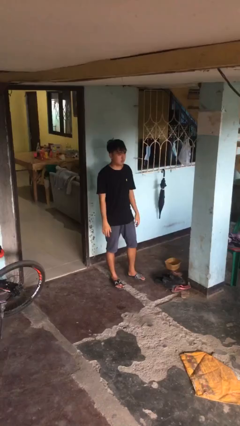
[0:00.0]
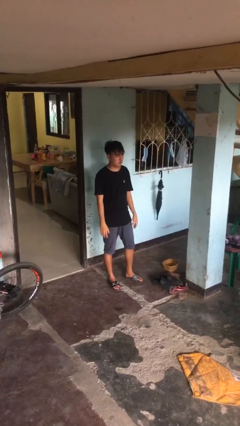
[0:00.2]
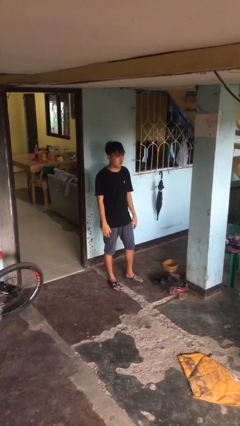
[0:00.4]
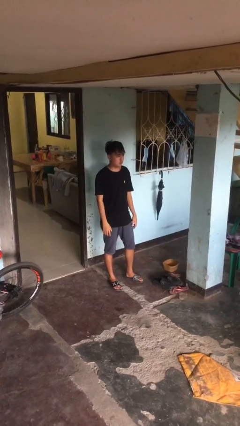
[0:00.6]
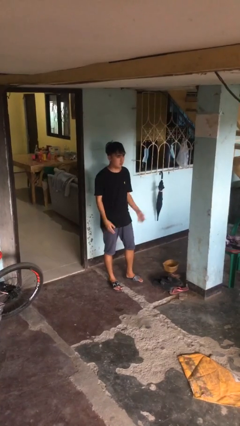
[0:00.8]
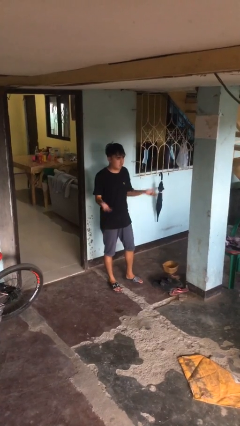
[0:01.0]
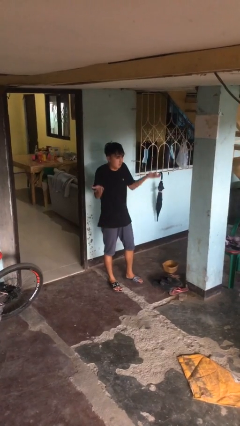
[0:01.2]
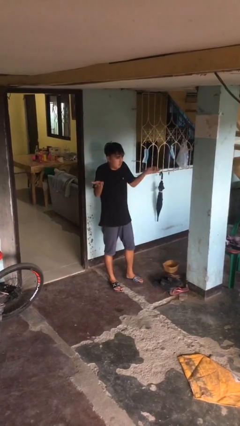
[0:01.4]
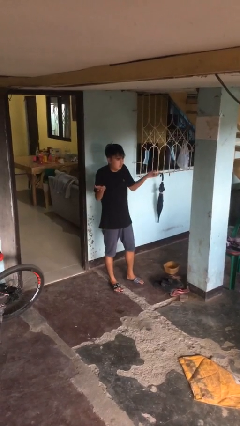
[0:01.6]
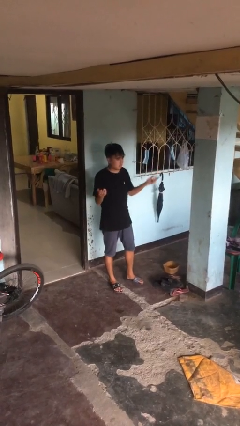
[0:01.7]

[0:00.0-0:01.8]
person shrugs

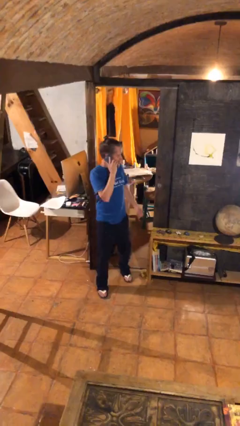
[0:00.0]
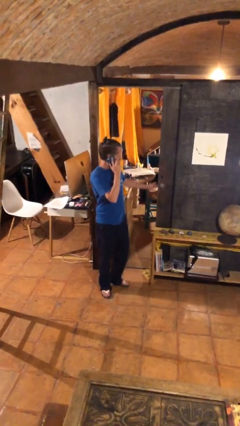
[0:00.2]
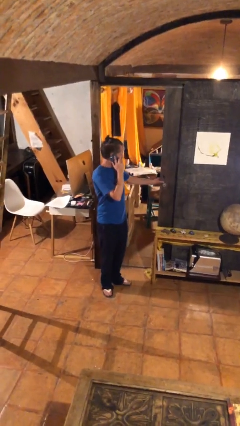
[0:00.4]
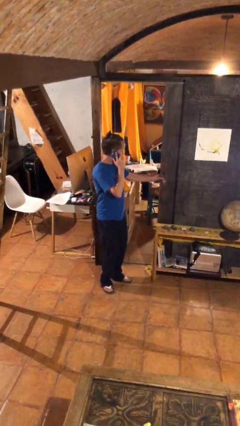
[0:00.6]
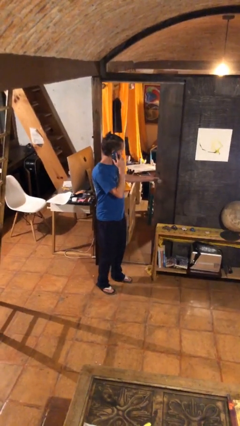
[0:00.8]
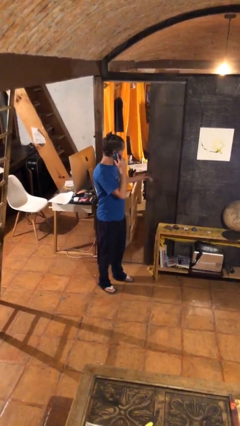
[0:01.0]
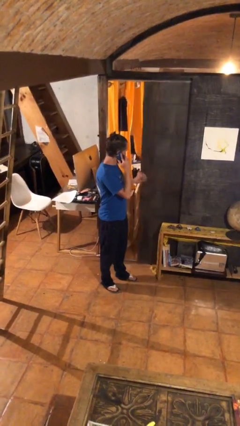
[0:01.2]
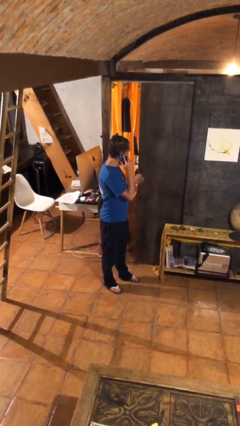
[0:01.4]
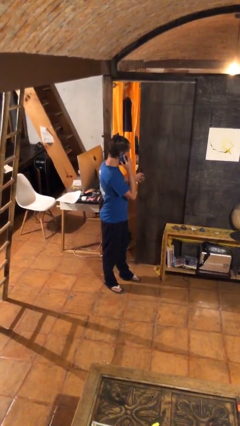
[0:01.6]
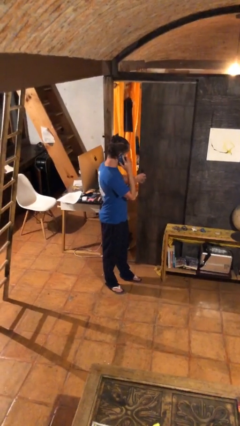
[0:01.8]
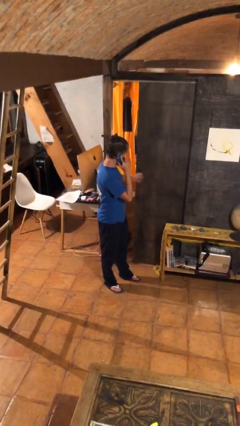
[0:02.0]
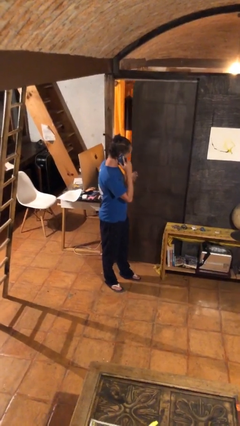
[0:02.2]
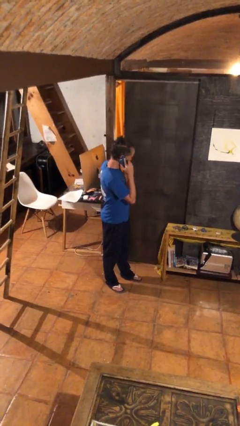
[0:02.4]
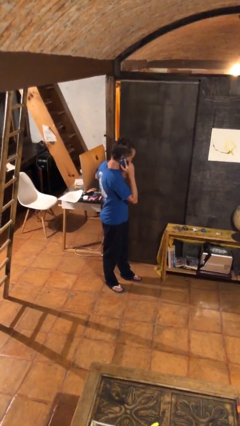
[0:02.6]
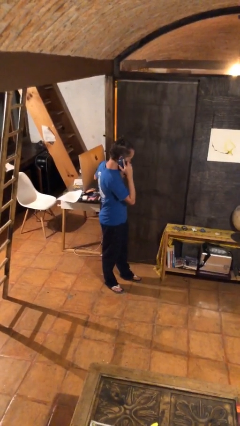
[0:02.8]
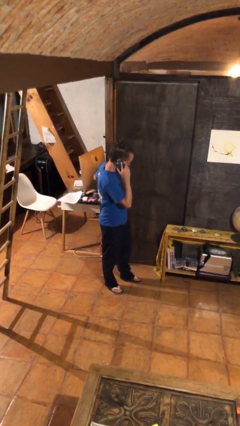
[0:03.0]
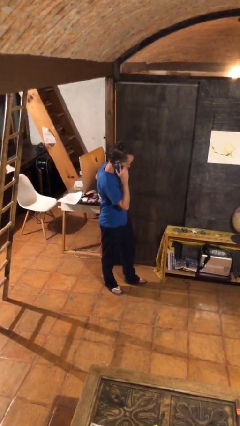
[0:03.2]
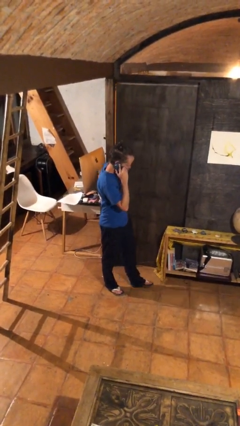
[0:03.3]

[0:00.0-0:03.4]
person closes facility door

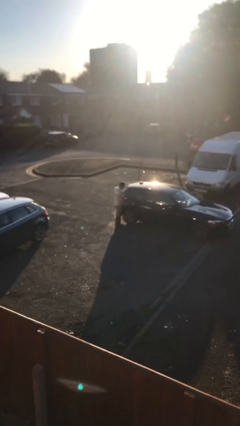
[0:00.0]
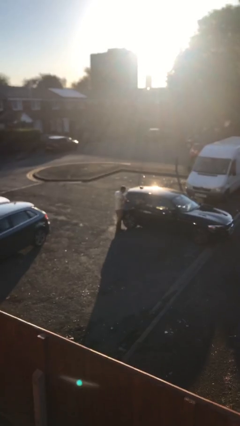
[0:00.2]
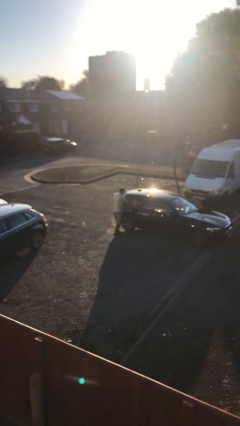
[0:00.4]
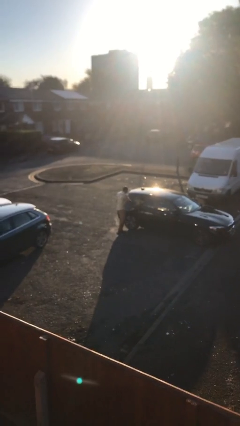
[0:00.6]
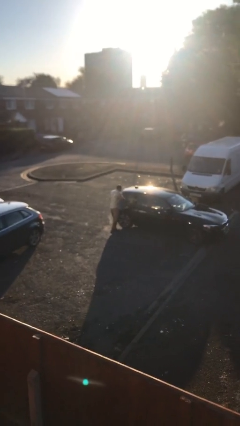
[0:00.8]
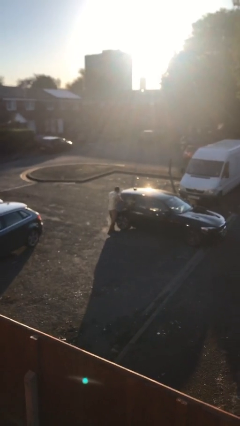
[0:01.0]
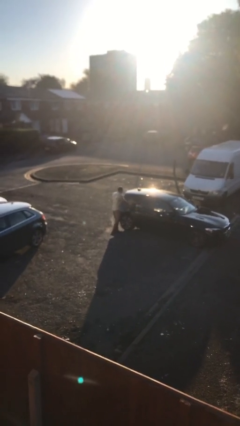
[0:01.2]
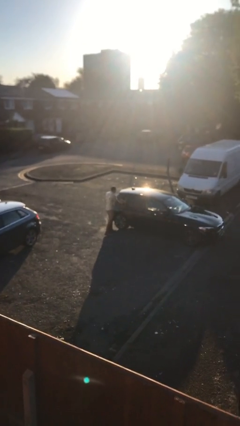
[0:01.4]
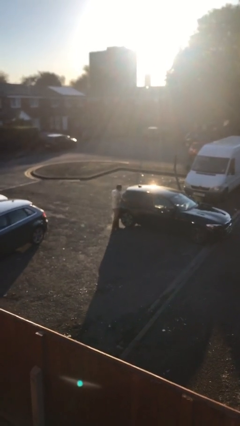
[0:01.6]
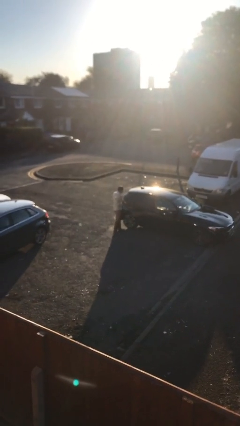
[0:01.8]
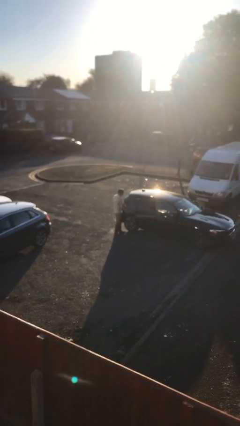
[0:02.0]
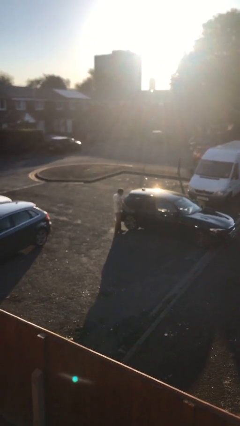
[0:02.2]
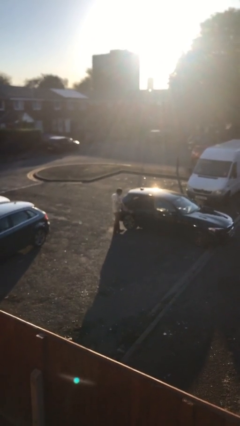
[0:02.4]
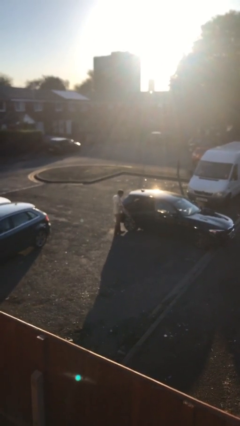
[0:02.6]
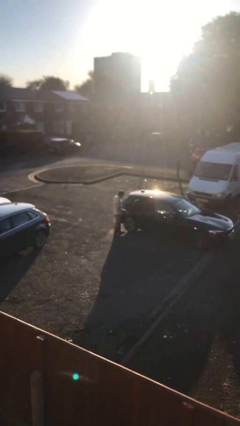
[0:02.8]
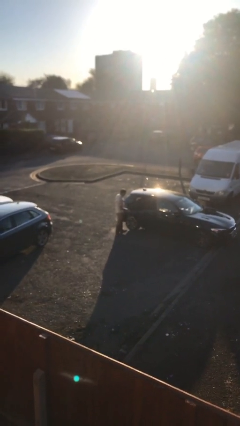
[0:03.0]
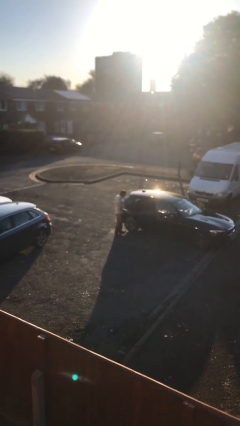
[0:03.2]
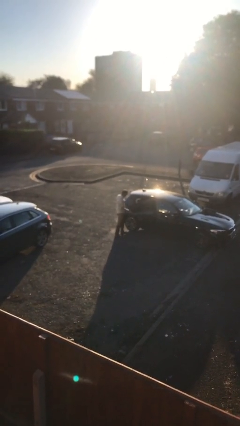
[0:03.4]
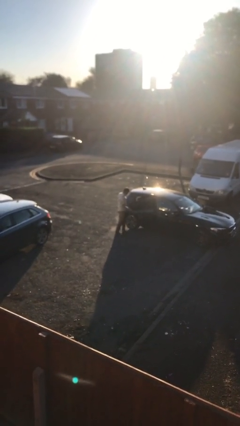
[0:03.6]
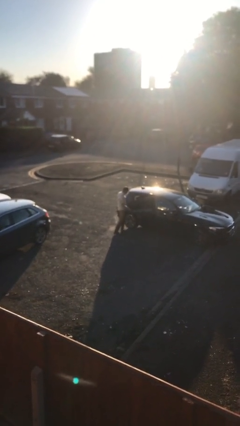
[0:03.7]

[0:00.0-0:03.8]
person opens car door

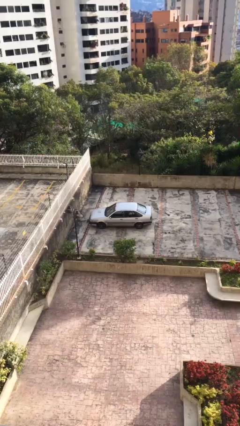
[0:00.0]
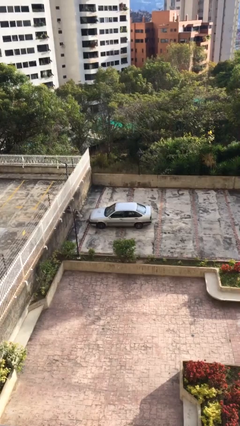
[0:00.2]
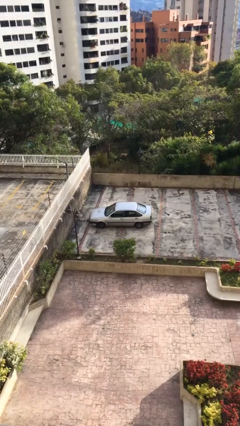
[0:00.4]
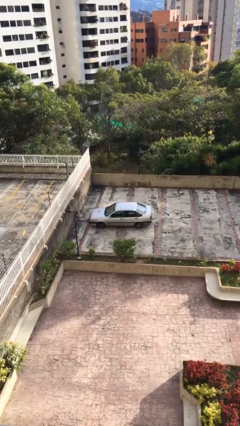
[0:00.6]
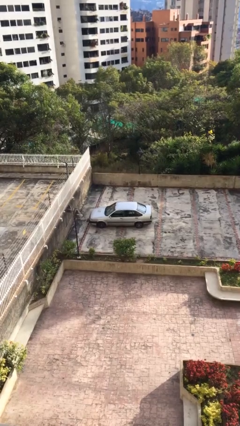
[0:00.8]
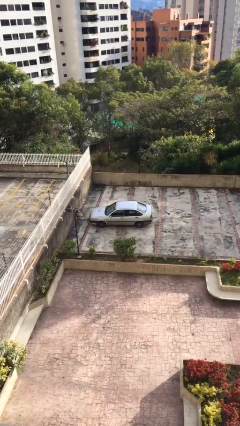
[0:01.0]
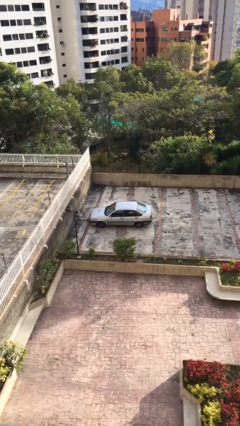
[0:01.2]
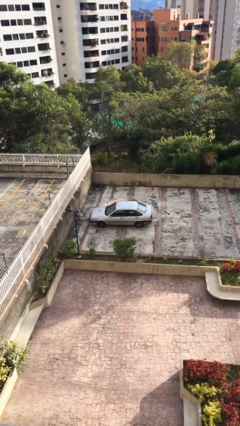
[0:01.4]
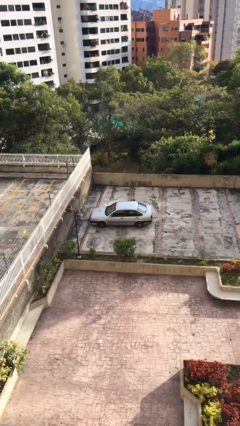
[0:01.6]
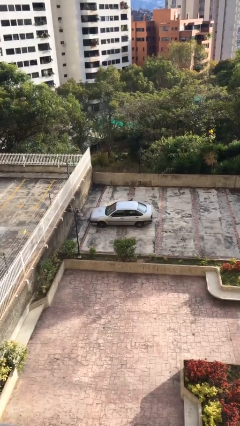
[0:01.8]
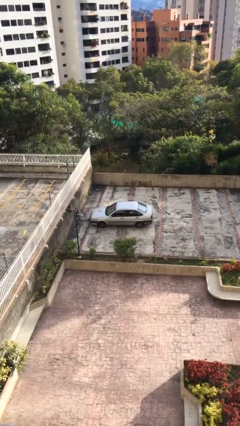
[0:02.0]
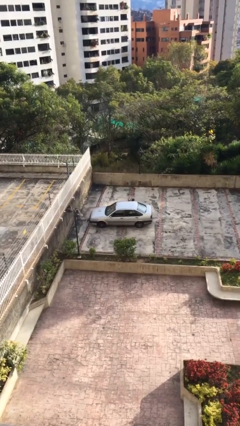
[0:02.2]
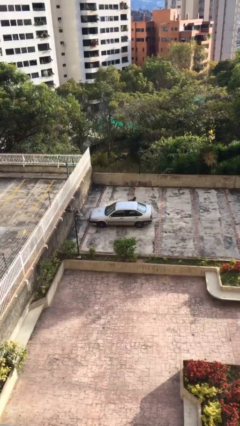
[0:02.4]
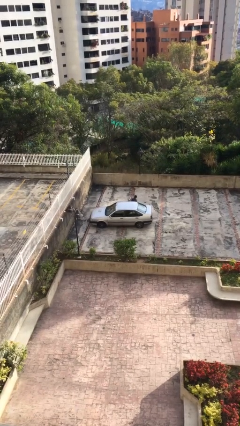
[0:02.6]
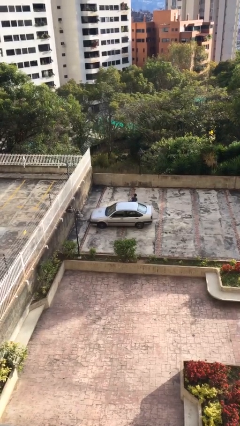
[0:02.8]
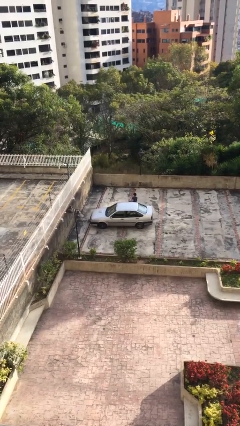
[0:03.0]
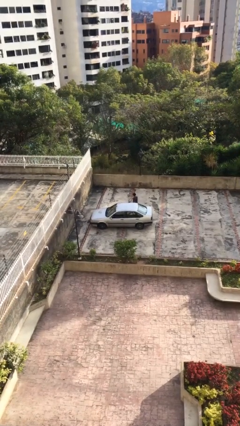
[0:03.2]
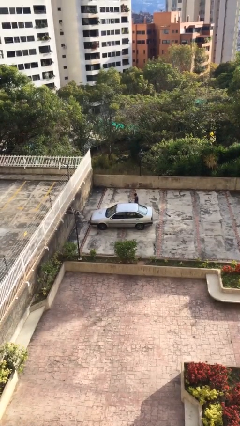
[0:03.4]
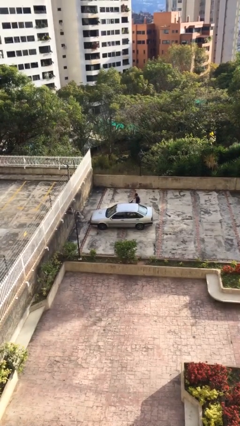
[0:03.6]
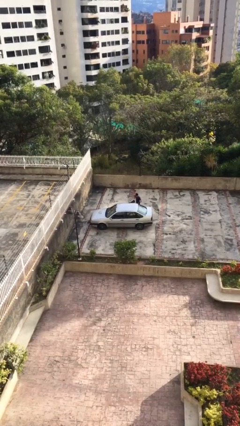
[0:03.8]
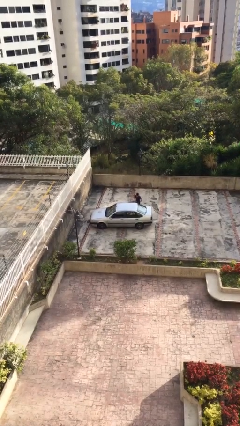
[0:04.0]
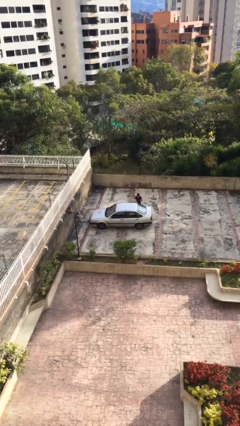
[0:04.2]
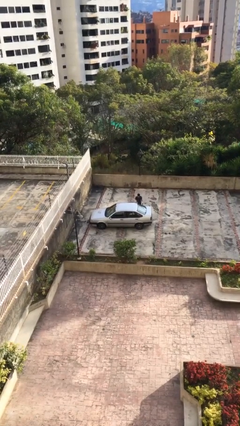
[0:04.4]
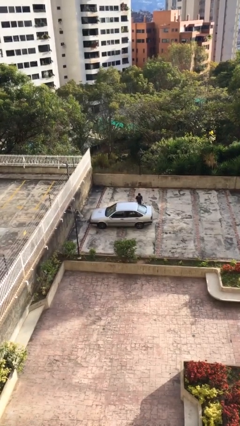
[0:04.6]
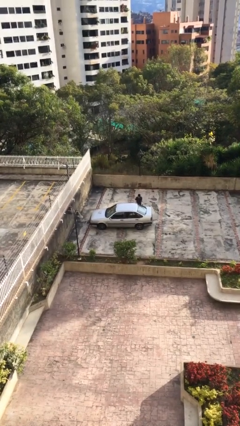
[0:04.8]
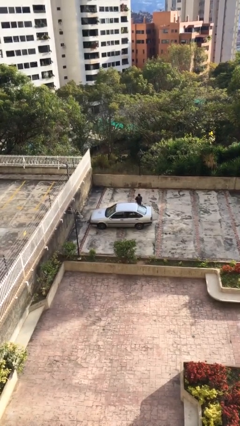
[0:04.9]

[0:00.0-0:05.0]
car drops off person

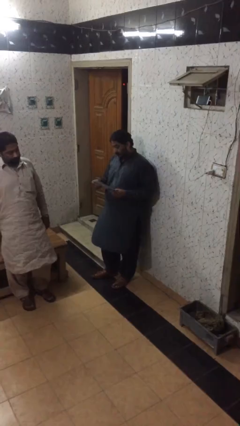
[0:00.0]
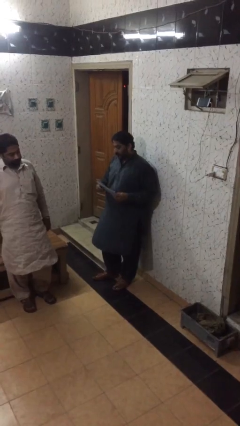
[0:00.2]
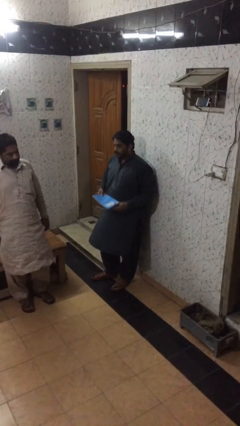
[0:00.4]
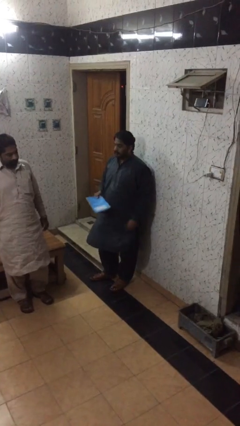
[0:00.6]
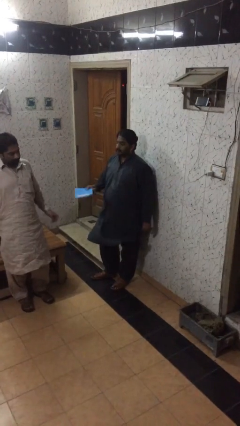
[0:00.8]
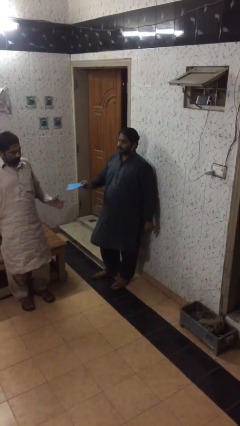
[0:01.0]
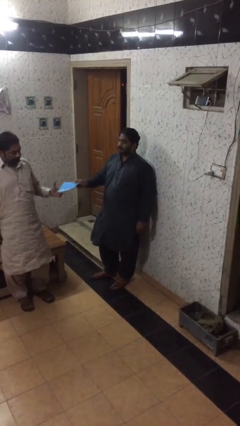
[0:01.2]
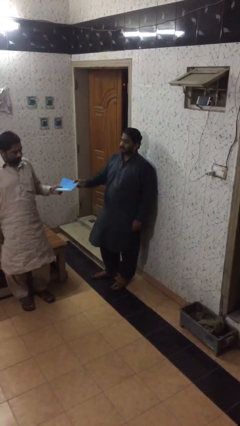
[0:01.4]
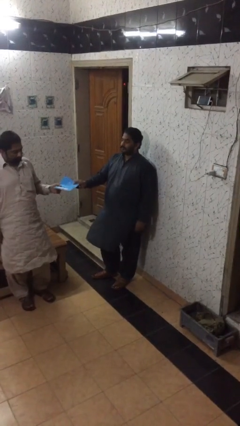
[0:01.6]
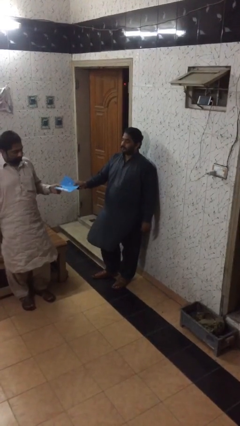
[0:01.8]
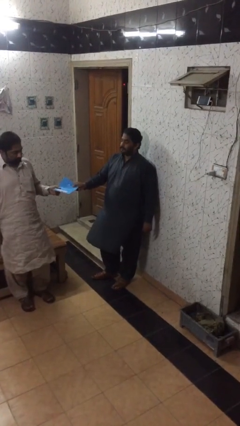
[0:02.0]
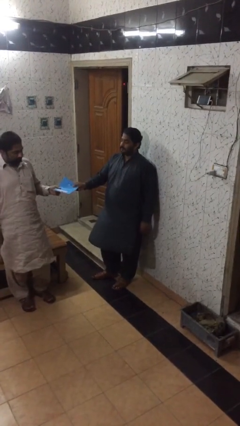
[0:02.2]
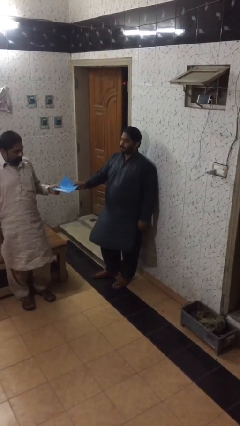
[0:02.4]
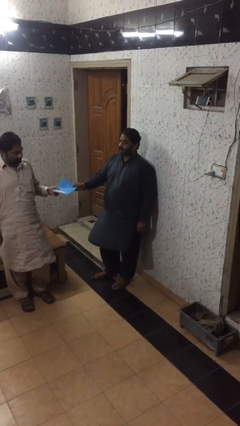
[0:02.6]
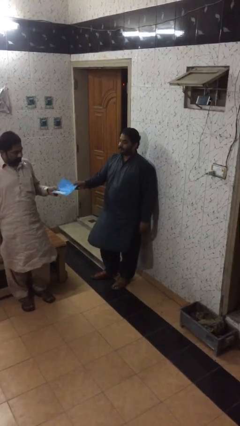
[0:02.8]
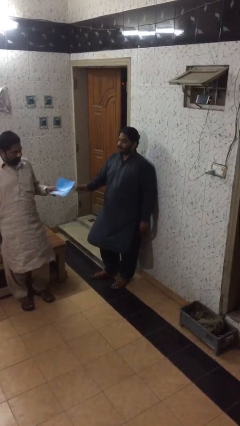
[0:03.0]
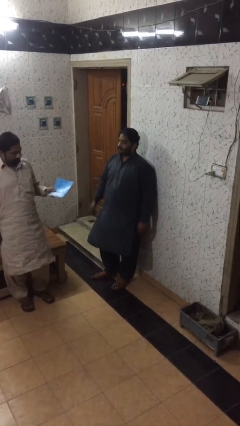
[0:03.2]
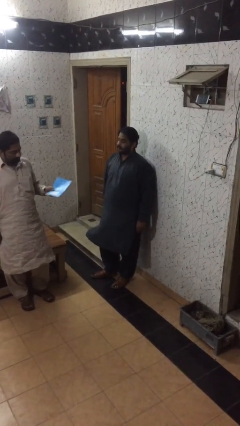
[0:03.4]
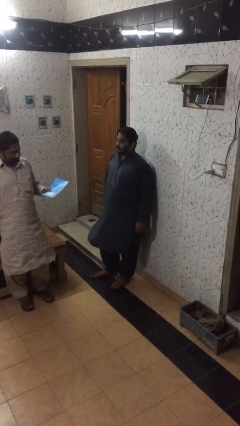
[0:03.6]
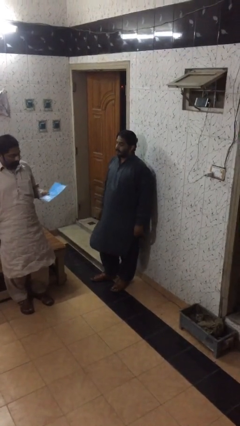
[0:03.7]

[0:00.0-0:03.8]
person transfers object to person
